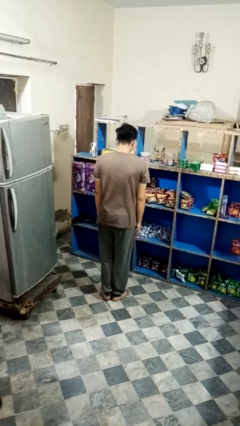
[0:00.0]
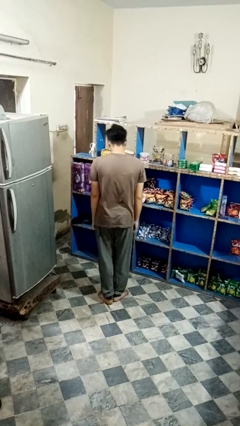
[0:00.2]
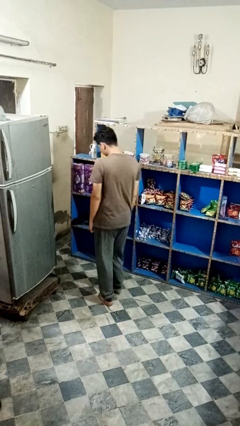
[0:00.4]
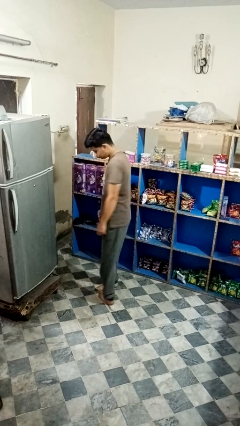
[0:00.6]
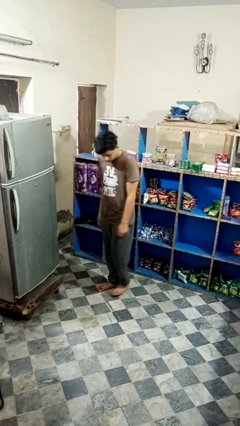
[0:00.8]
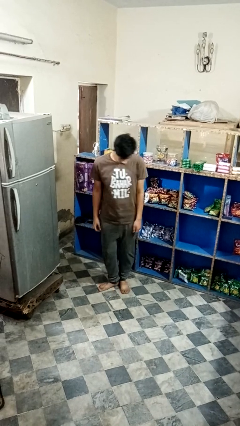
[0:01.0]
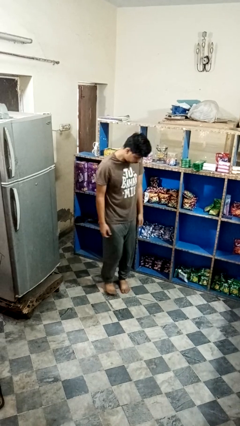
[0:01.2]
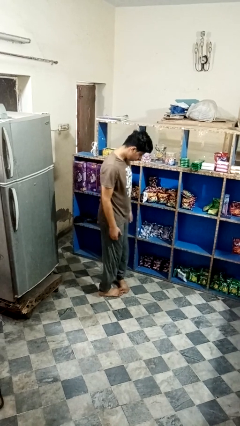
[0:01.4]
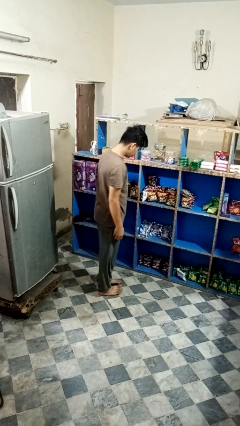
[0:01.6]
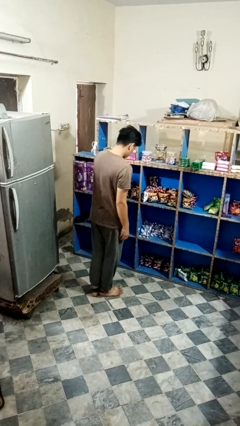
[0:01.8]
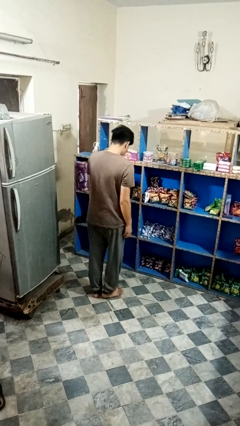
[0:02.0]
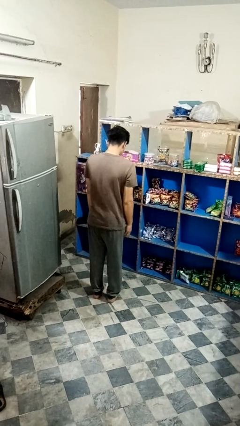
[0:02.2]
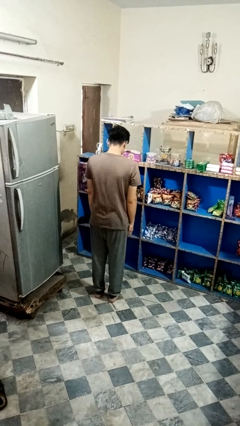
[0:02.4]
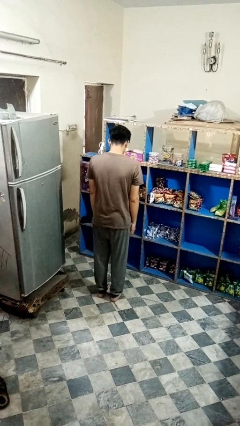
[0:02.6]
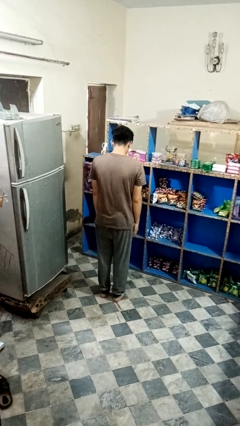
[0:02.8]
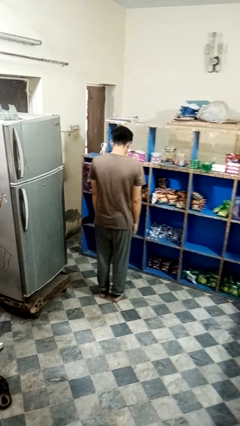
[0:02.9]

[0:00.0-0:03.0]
person twirls

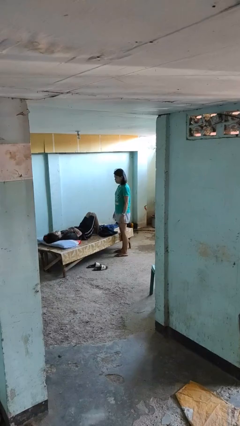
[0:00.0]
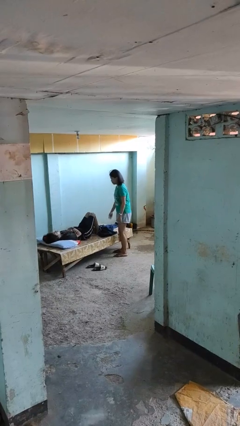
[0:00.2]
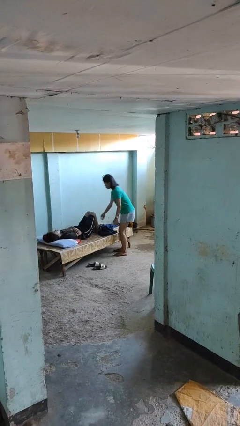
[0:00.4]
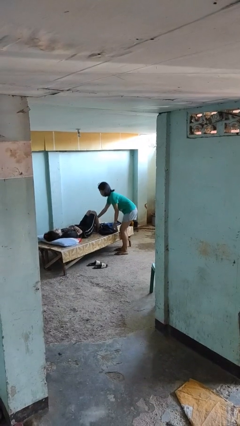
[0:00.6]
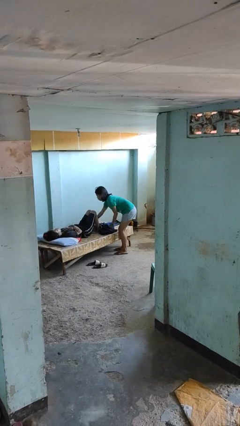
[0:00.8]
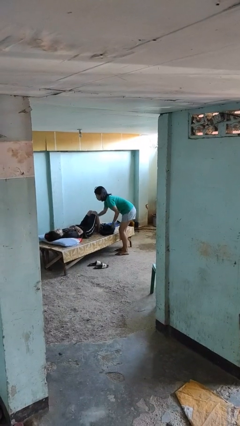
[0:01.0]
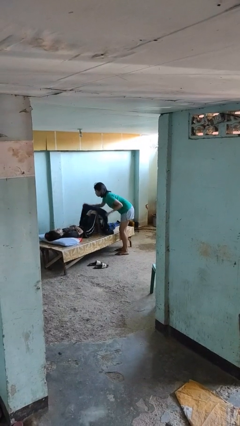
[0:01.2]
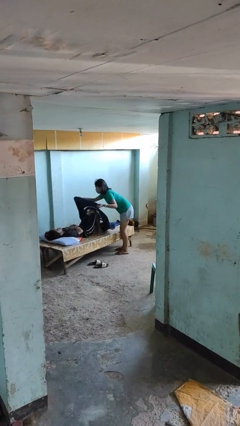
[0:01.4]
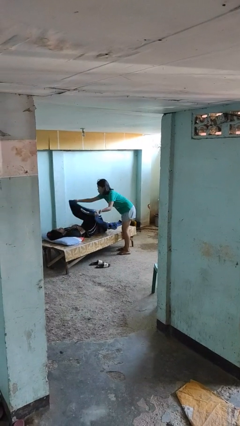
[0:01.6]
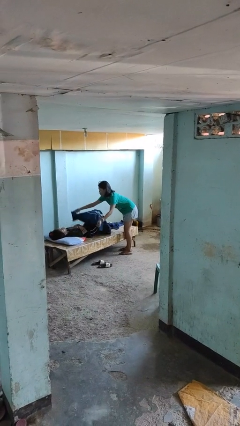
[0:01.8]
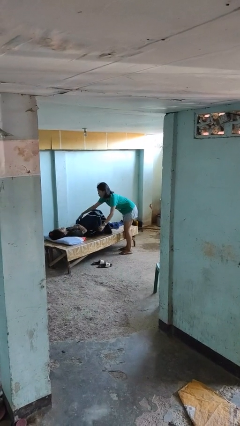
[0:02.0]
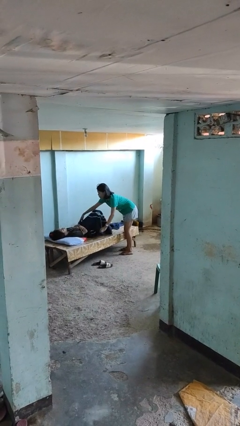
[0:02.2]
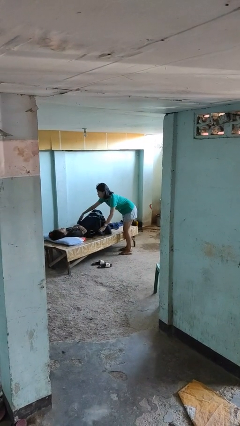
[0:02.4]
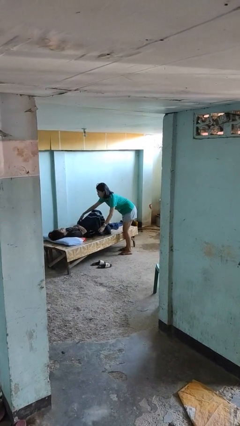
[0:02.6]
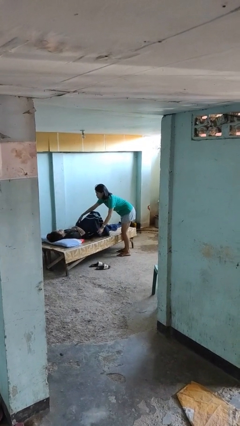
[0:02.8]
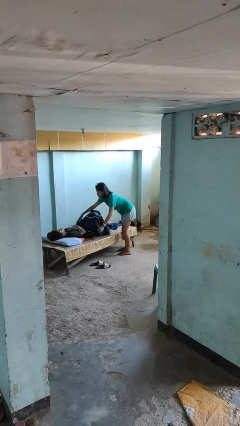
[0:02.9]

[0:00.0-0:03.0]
person covers friend with blanket

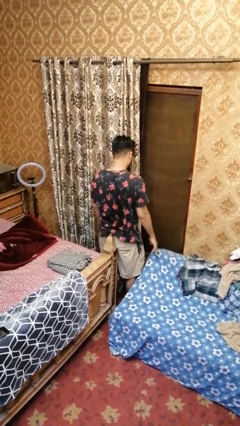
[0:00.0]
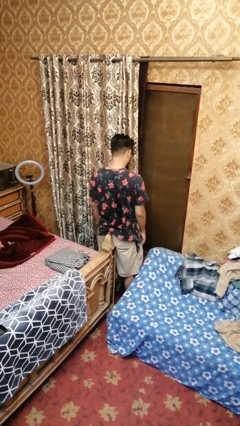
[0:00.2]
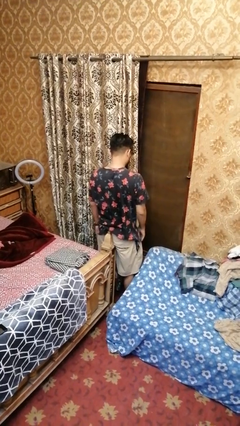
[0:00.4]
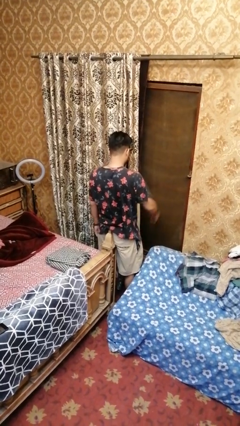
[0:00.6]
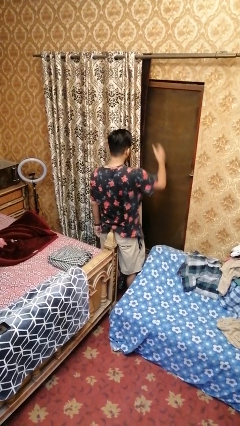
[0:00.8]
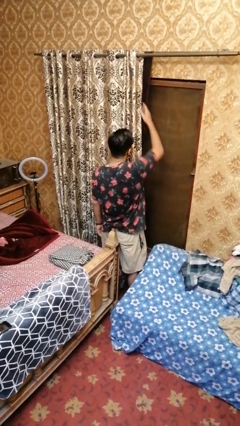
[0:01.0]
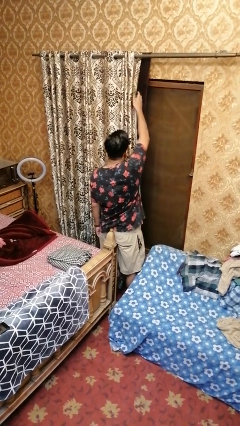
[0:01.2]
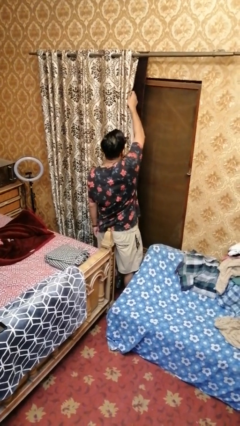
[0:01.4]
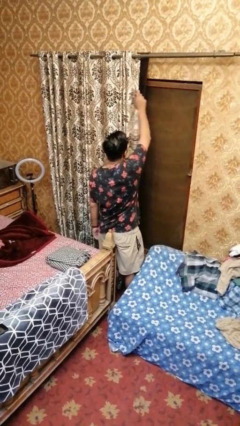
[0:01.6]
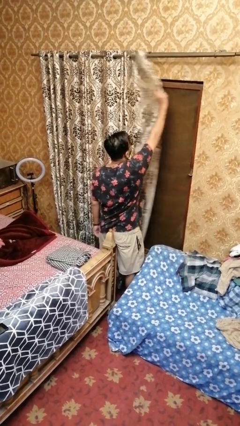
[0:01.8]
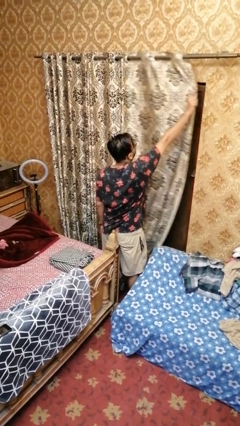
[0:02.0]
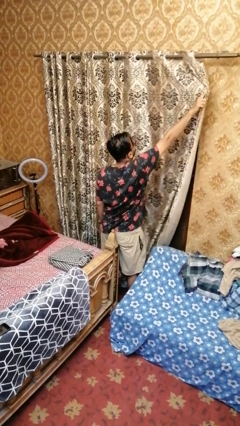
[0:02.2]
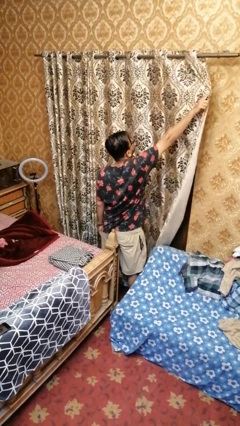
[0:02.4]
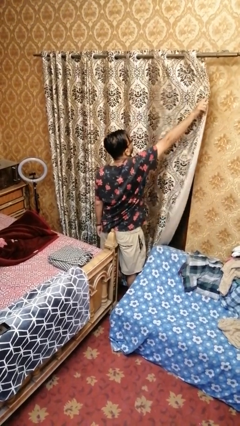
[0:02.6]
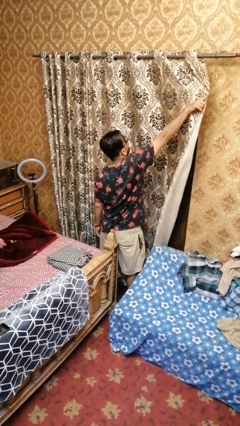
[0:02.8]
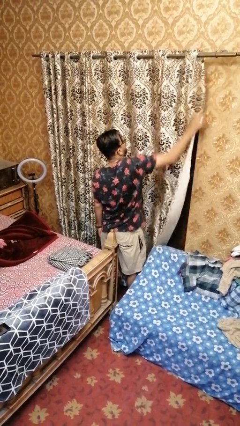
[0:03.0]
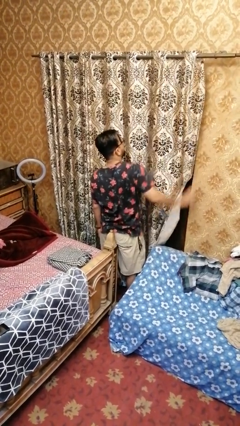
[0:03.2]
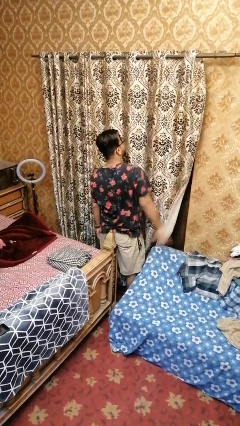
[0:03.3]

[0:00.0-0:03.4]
person closes curtains

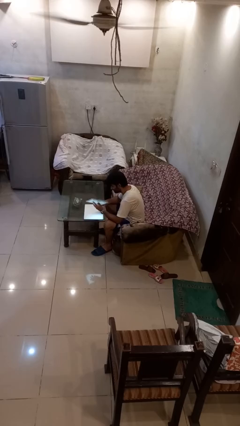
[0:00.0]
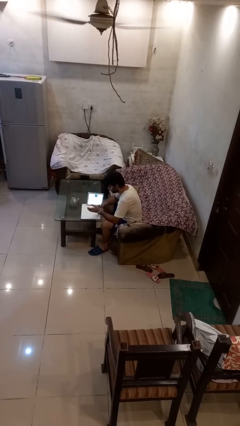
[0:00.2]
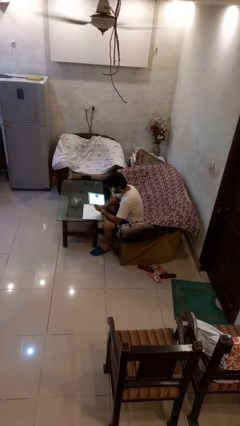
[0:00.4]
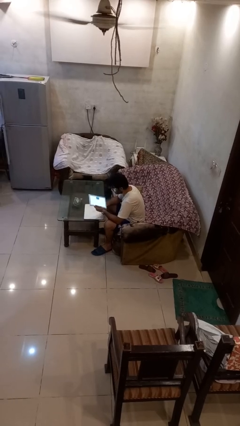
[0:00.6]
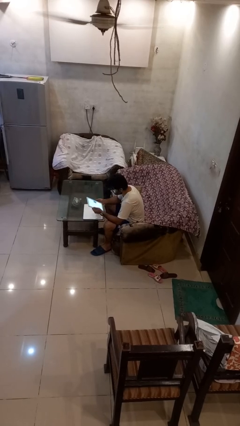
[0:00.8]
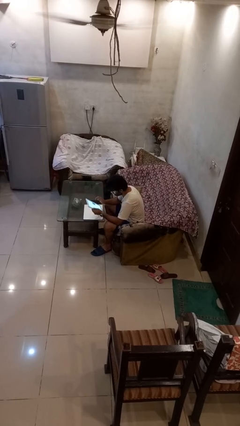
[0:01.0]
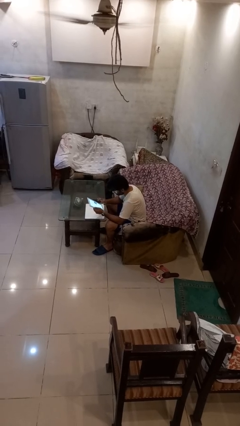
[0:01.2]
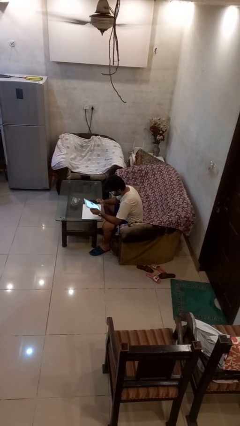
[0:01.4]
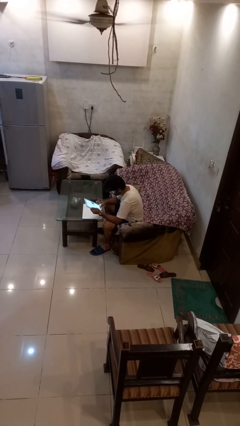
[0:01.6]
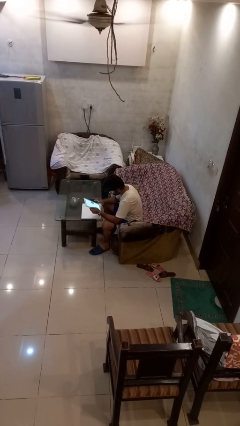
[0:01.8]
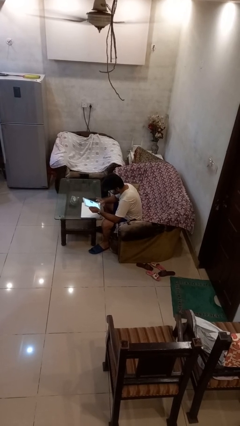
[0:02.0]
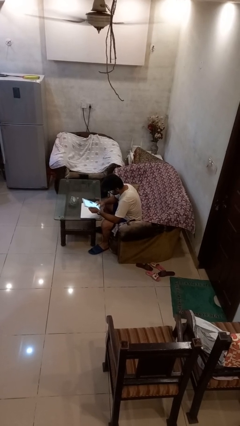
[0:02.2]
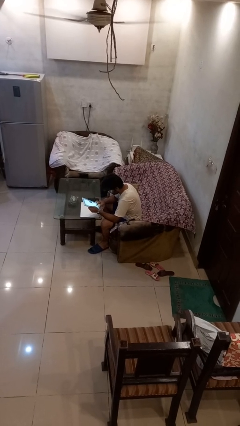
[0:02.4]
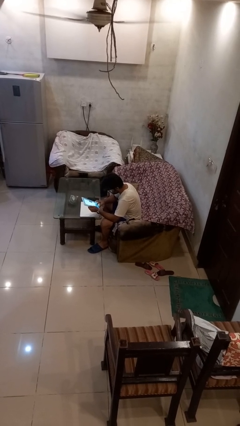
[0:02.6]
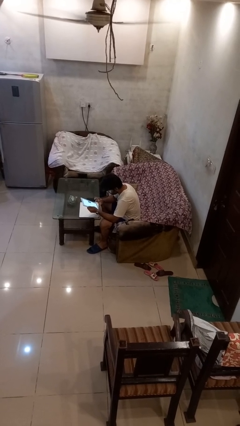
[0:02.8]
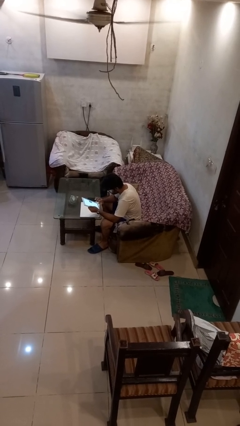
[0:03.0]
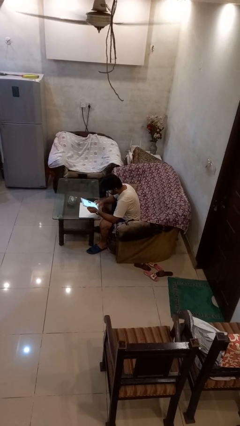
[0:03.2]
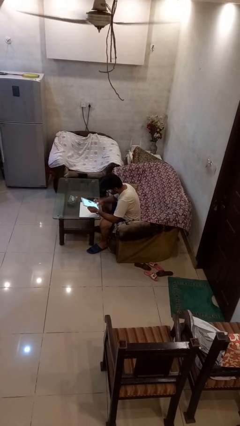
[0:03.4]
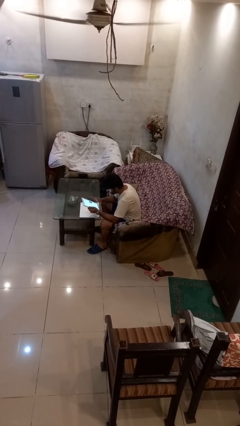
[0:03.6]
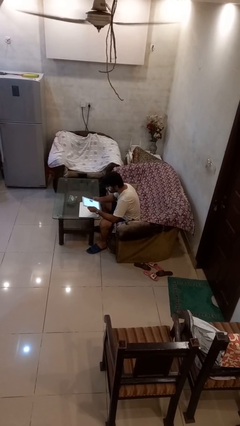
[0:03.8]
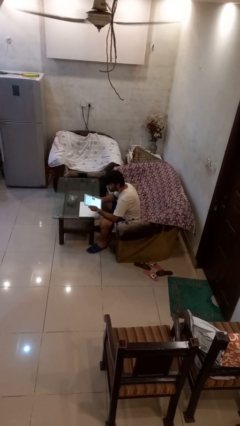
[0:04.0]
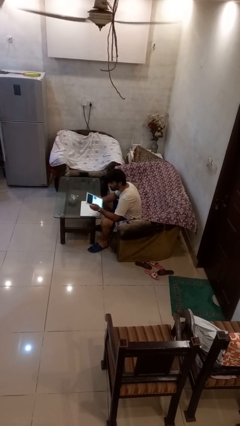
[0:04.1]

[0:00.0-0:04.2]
person interacts with tablet

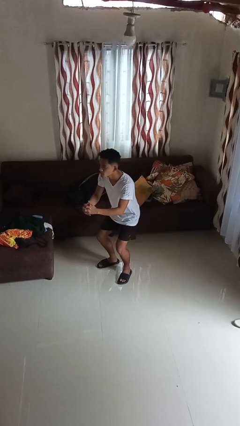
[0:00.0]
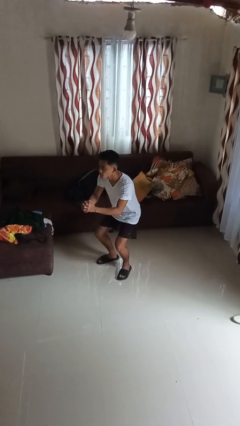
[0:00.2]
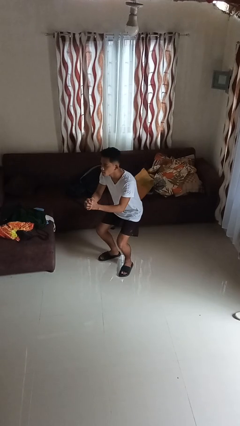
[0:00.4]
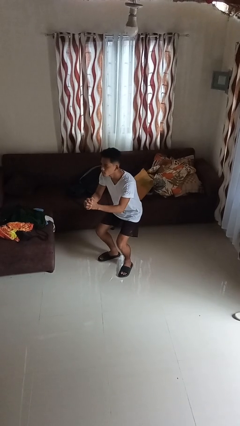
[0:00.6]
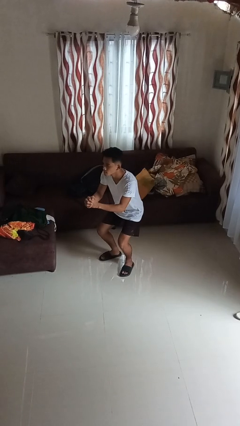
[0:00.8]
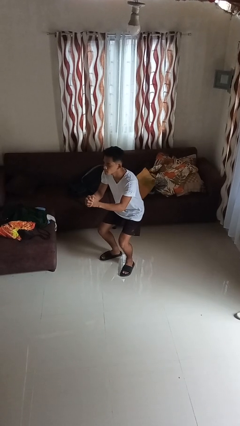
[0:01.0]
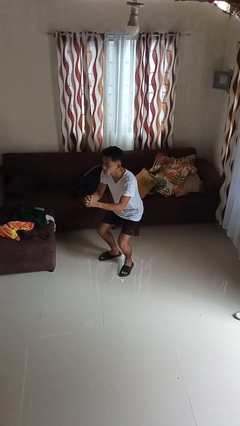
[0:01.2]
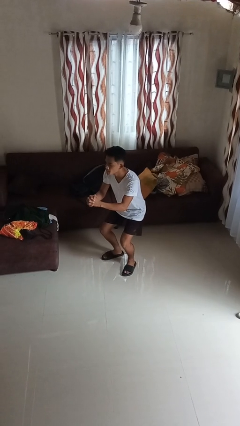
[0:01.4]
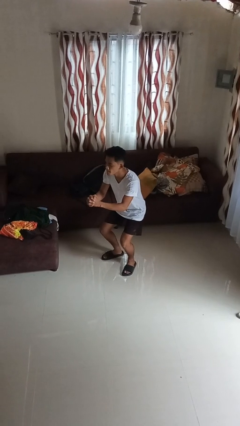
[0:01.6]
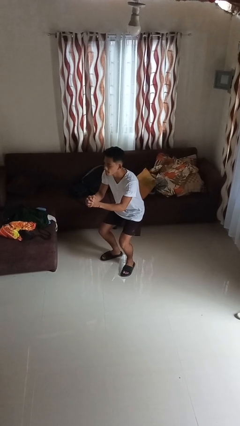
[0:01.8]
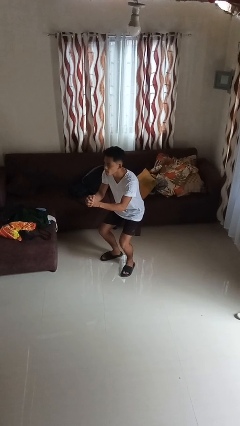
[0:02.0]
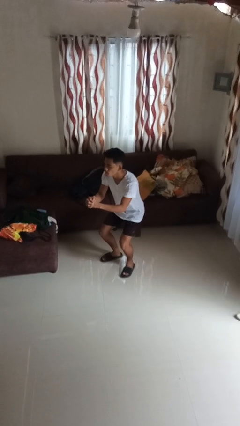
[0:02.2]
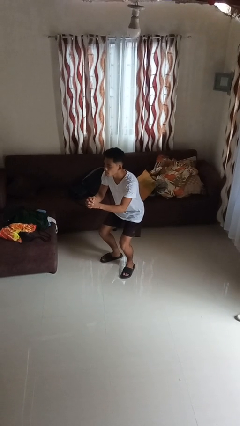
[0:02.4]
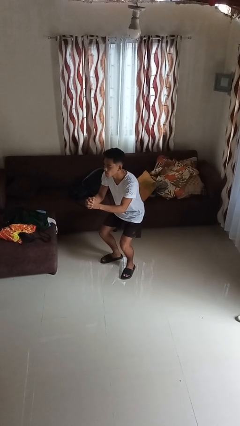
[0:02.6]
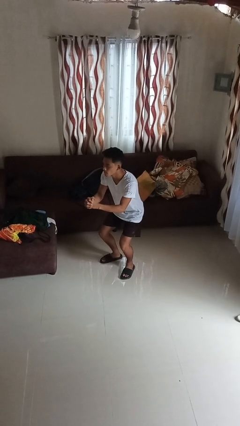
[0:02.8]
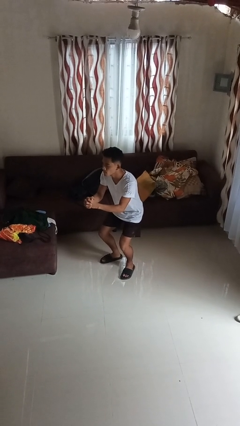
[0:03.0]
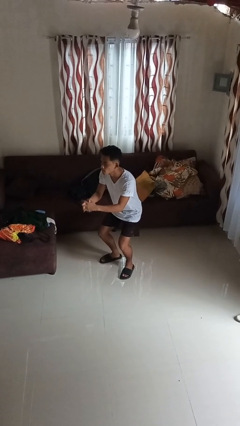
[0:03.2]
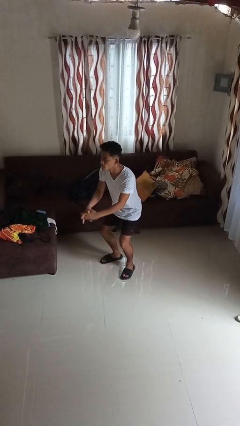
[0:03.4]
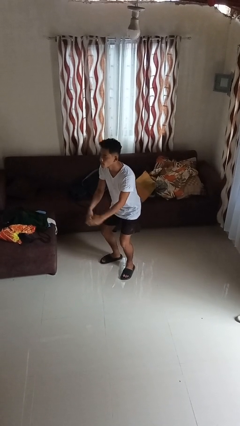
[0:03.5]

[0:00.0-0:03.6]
person squats

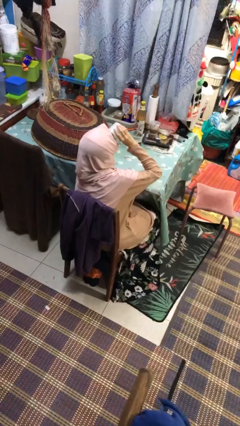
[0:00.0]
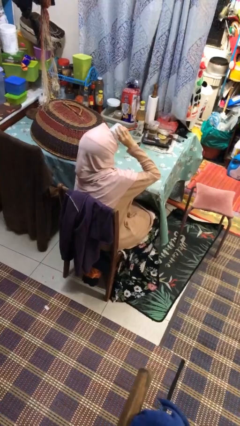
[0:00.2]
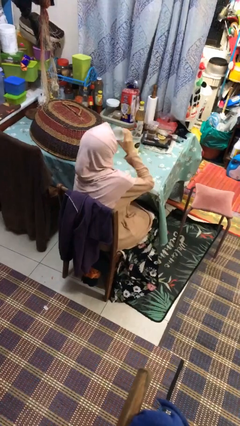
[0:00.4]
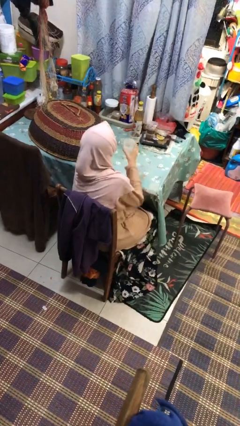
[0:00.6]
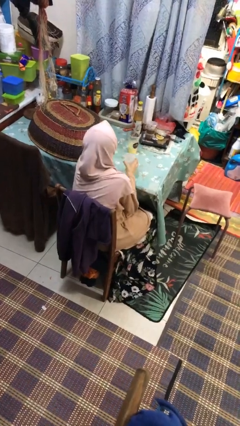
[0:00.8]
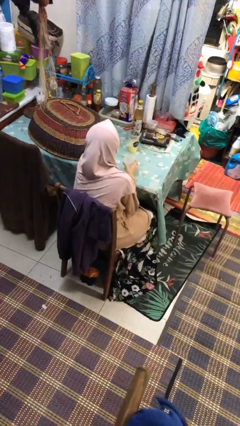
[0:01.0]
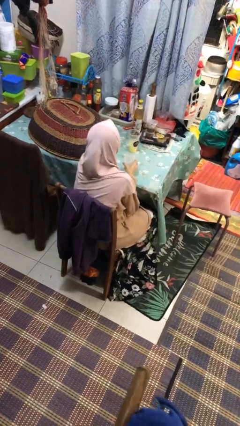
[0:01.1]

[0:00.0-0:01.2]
person puts down object on table
